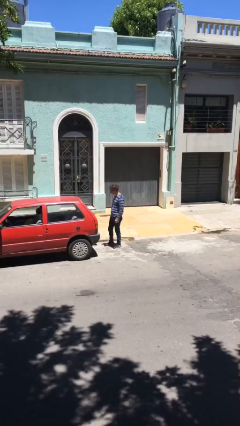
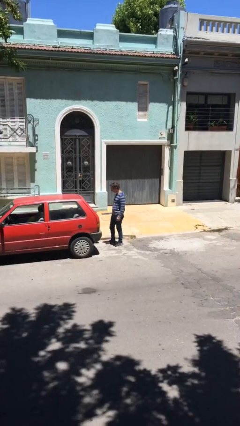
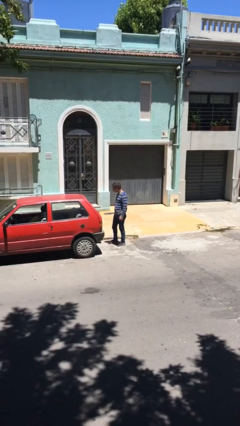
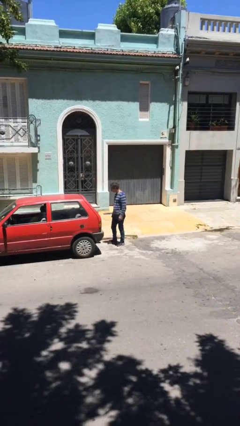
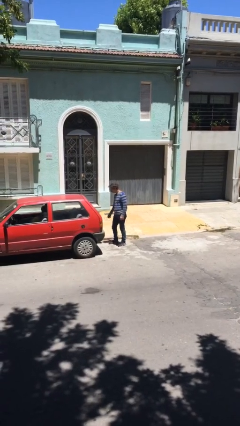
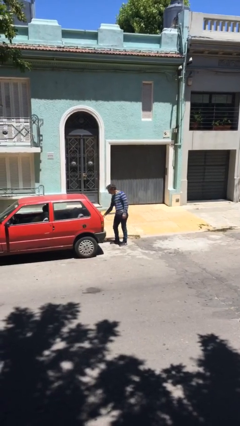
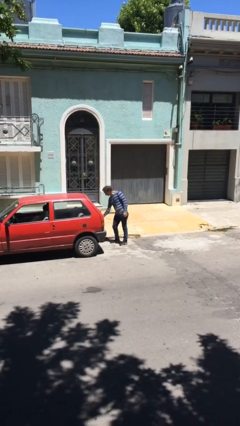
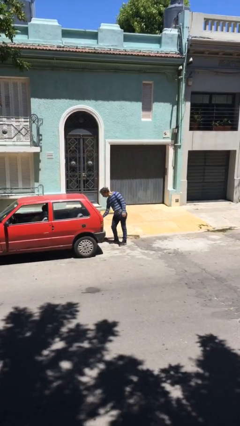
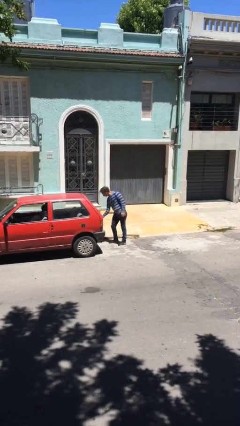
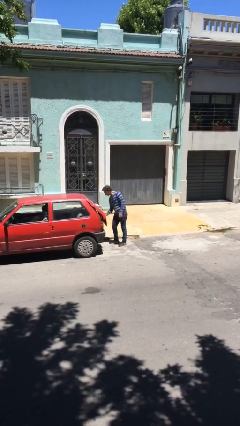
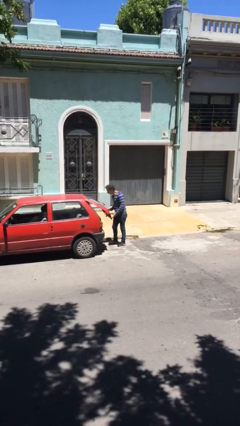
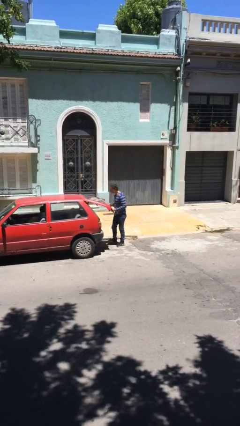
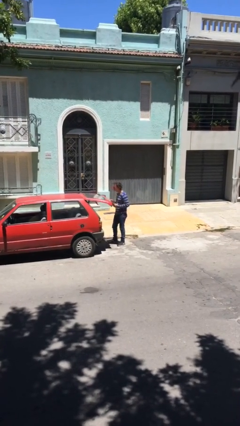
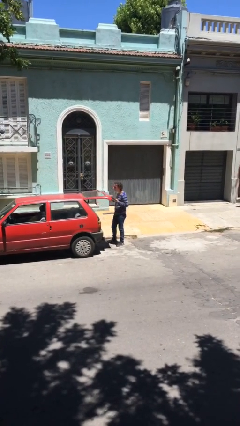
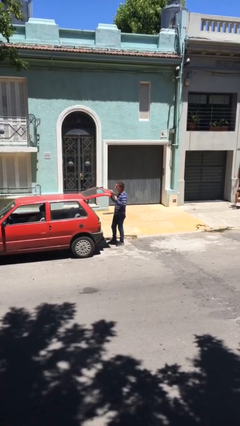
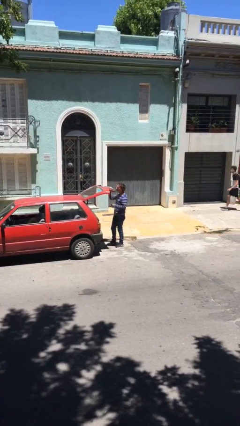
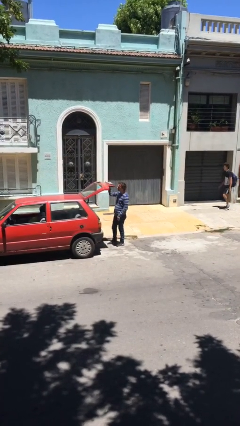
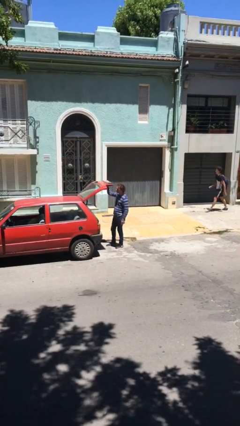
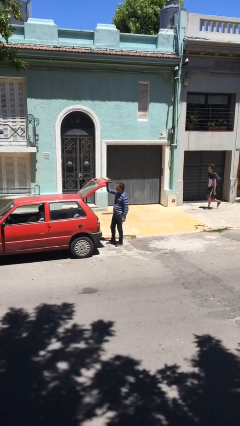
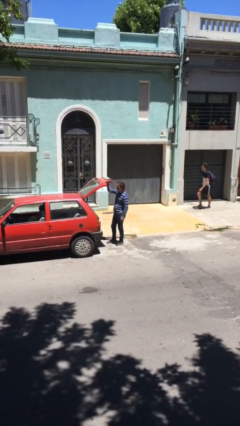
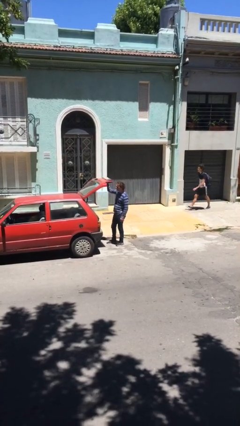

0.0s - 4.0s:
person opens car trunk

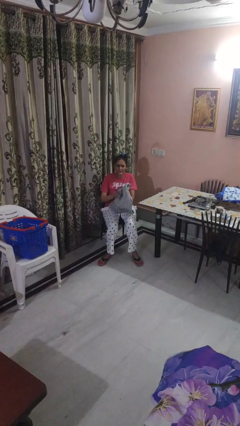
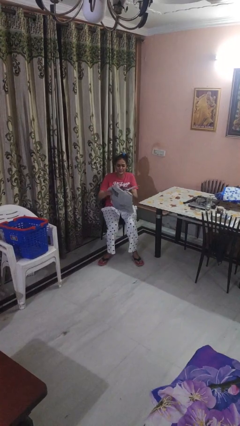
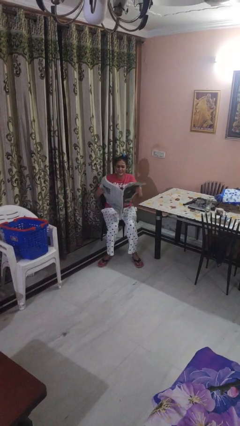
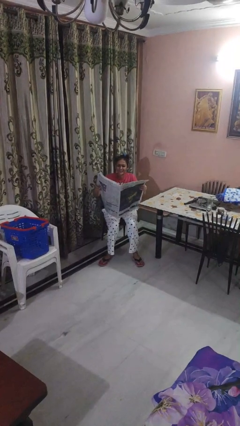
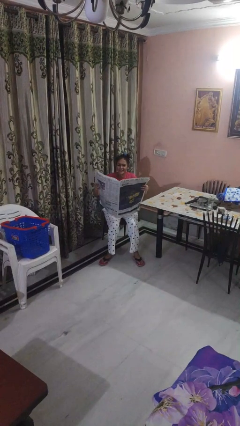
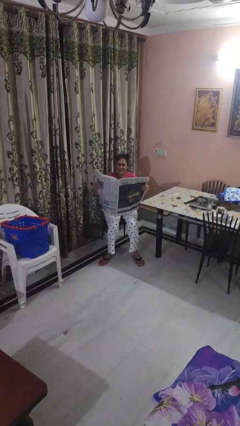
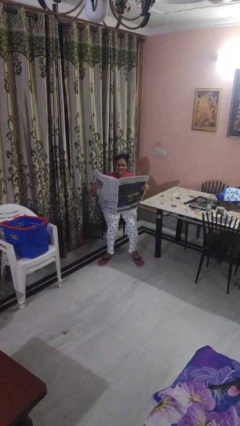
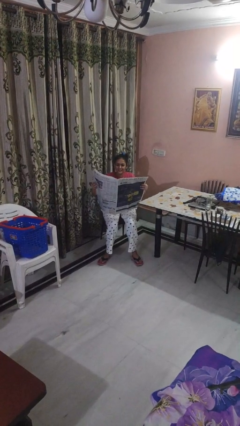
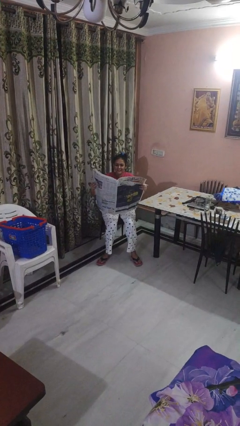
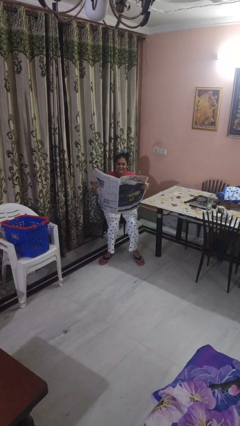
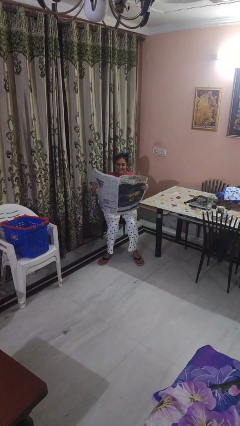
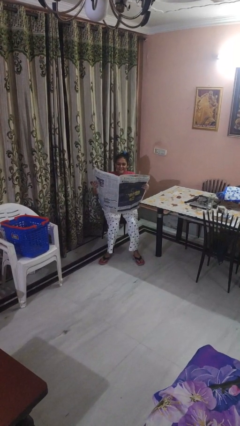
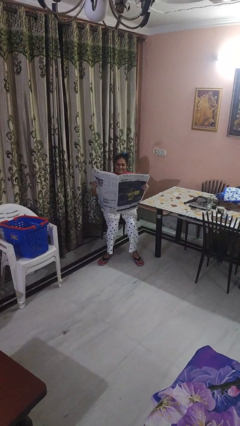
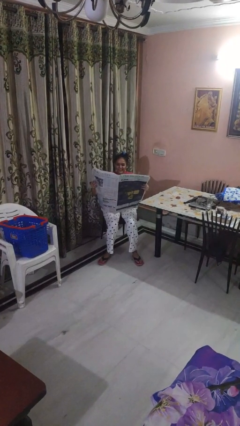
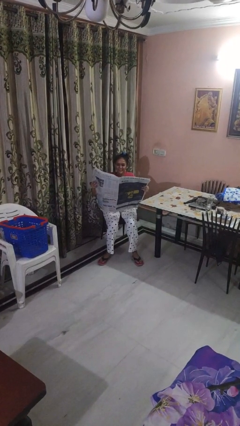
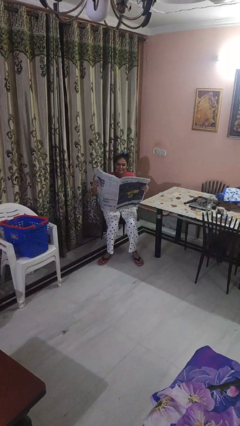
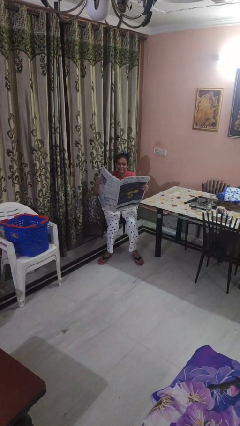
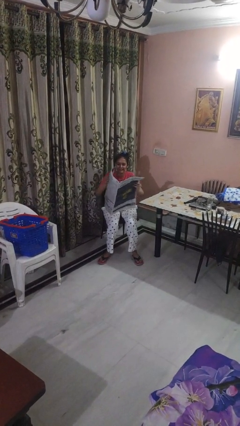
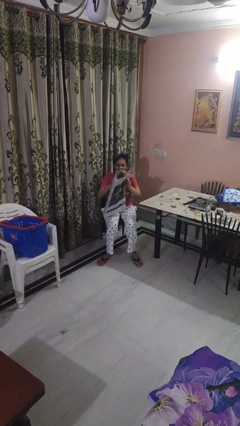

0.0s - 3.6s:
person reads newspaper

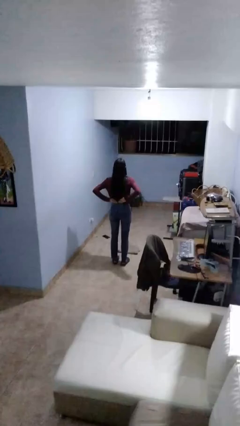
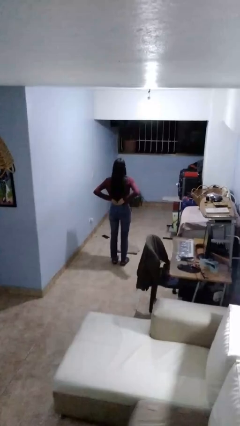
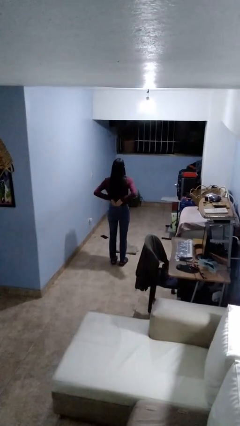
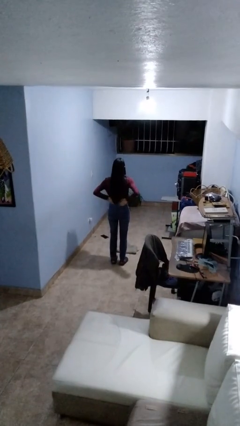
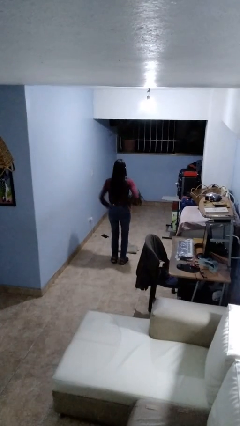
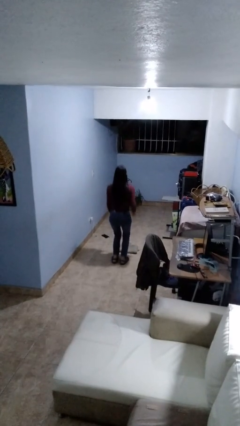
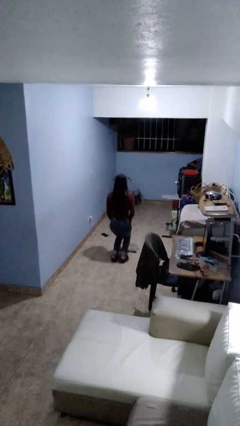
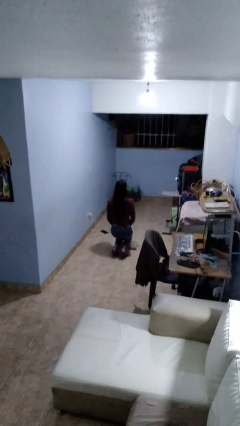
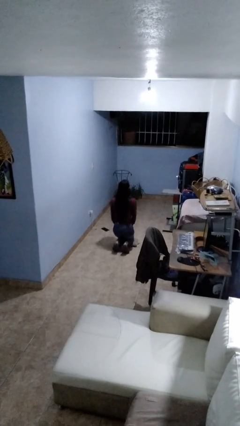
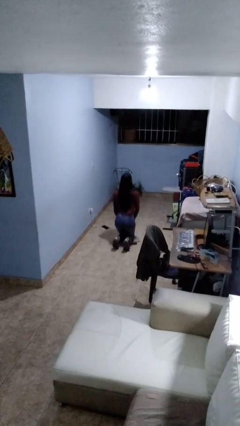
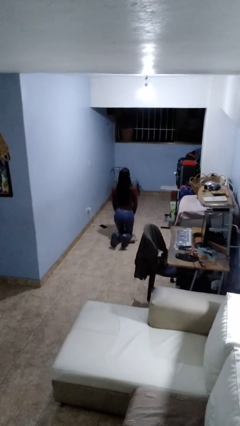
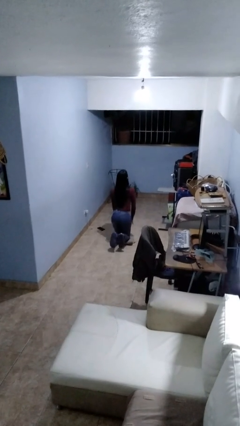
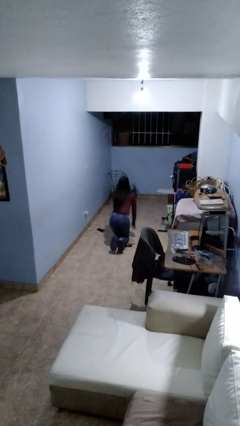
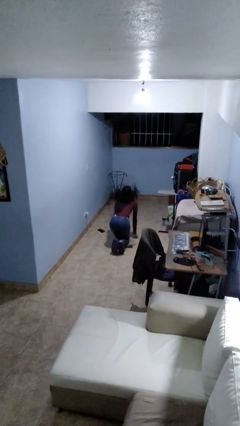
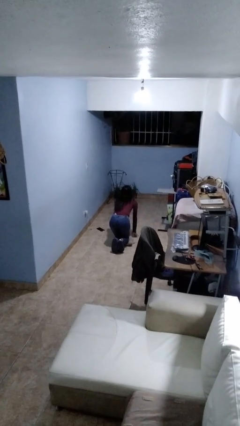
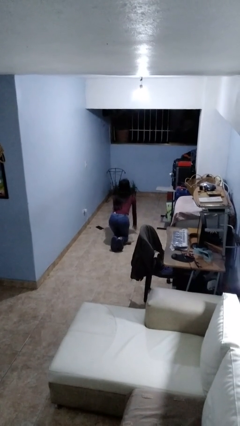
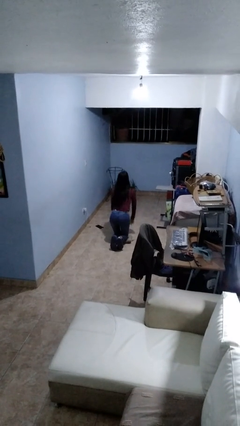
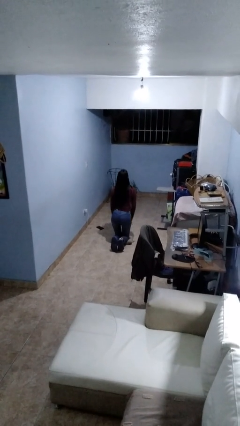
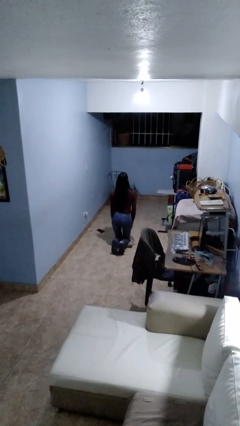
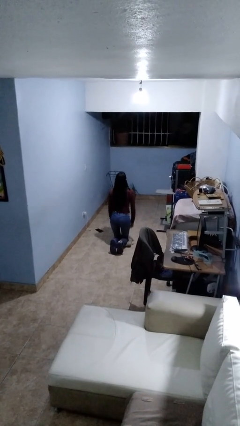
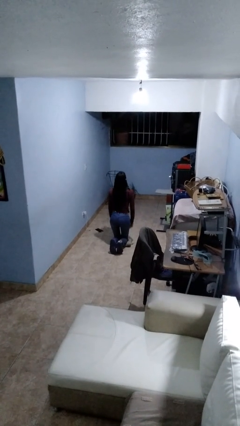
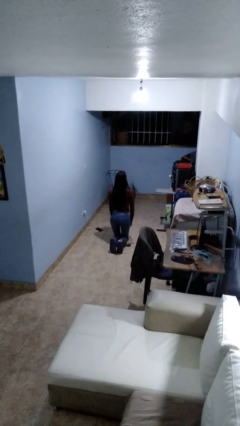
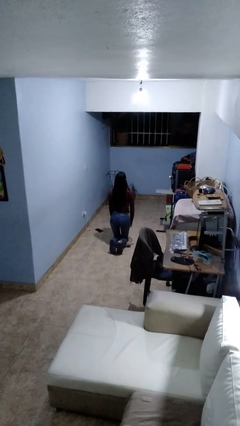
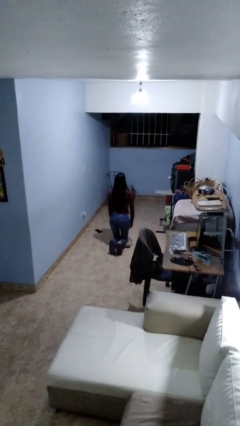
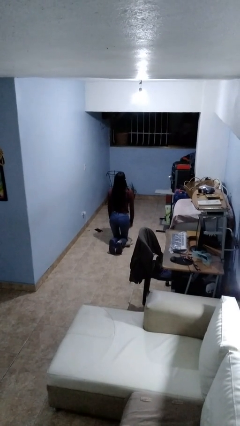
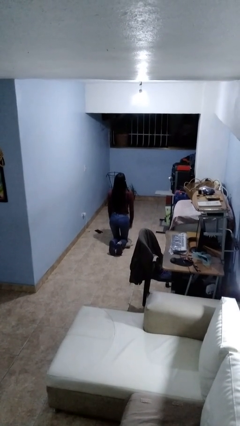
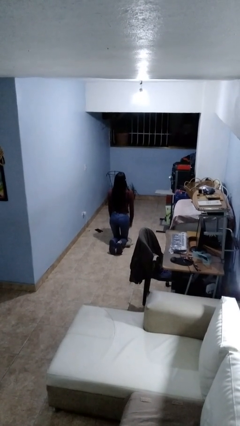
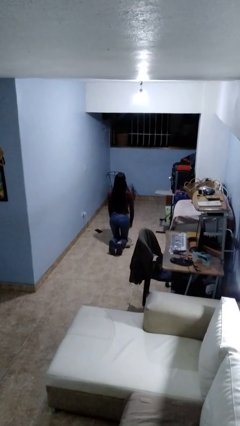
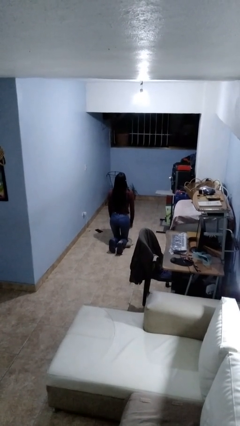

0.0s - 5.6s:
person kneels

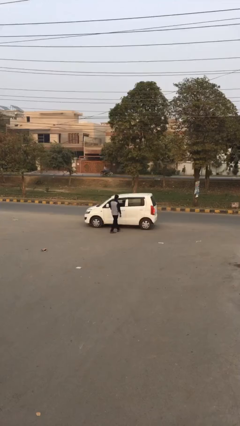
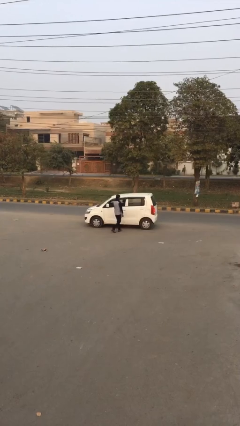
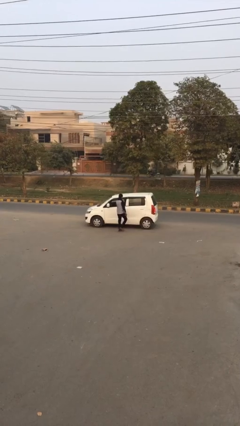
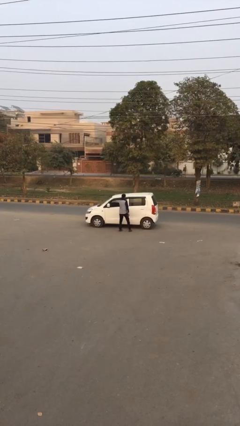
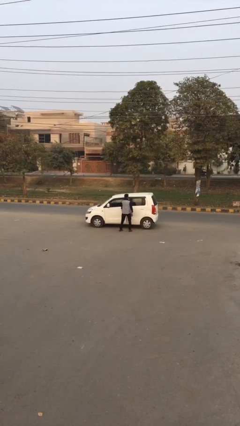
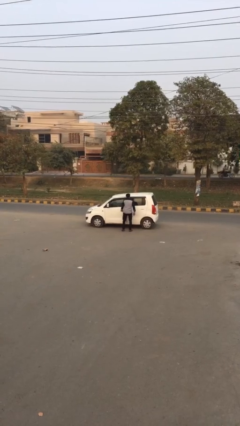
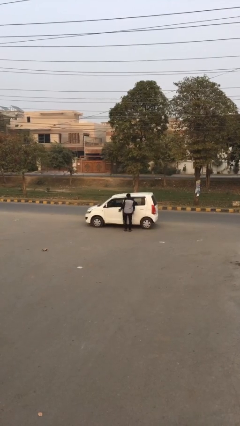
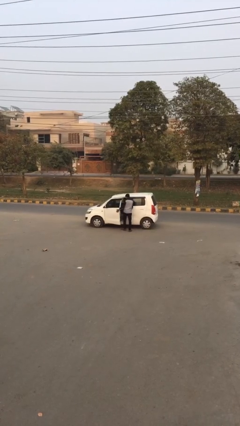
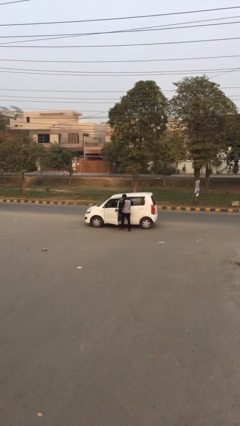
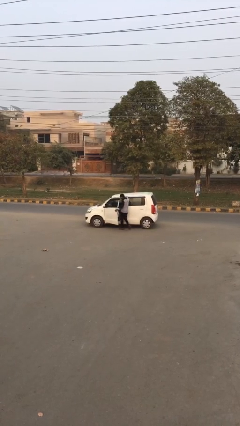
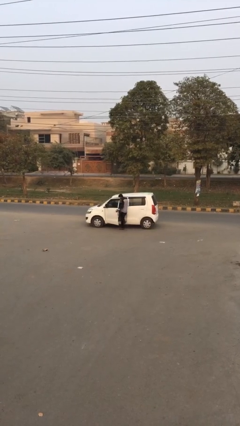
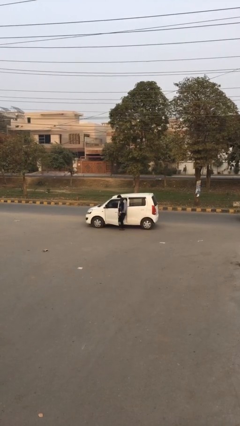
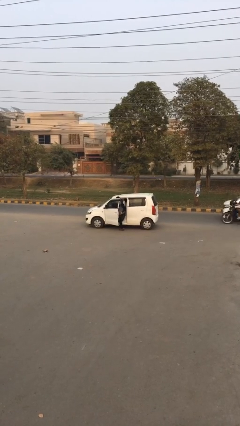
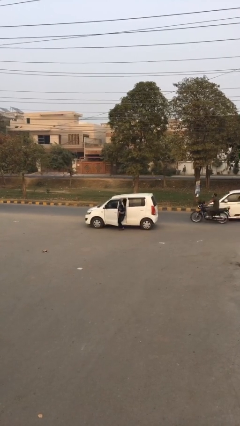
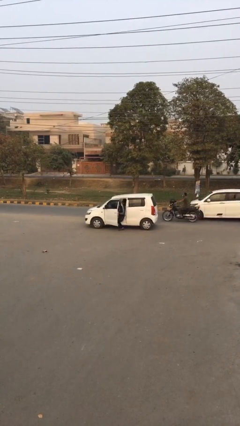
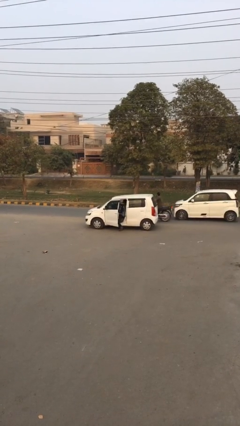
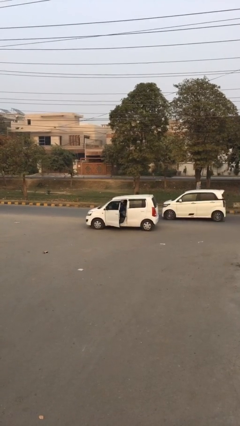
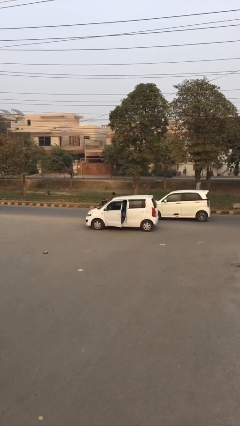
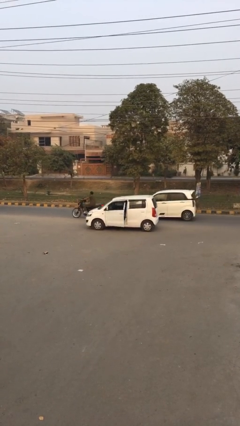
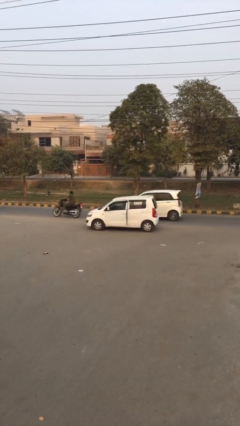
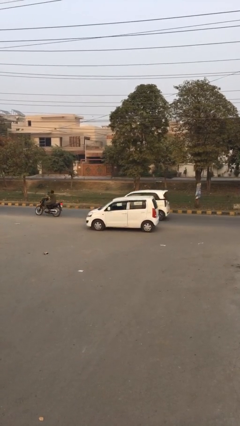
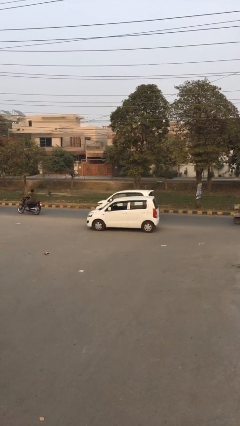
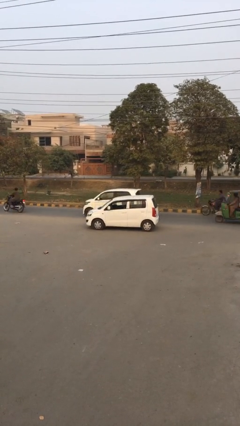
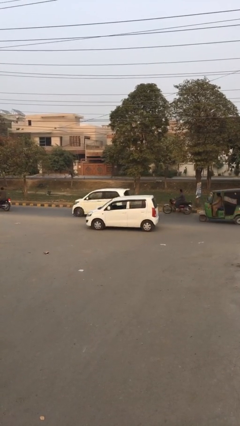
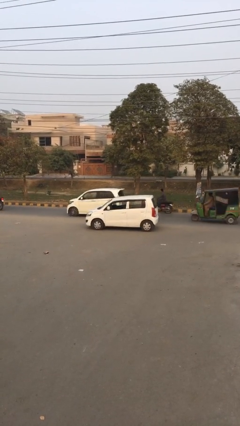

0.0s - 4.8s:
car picks up person
